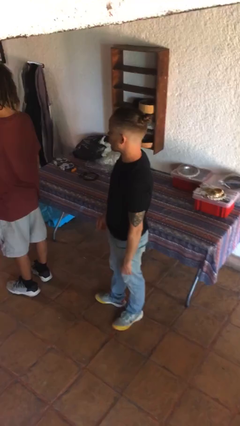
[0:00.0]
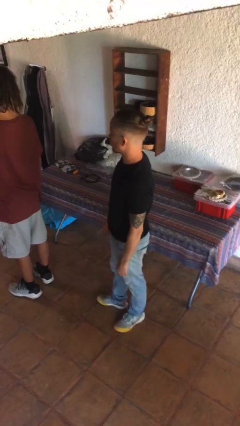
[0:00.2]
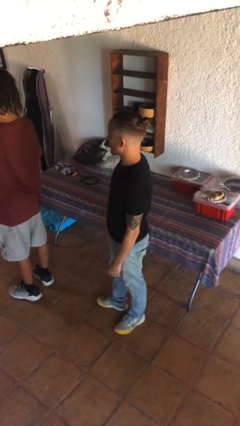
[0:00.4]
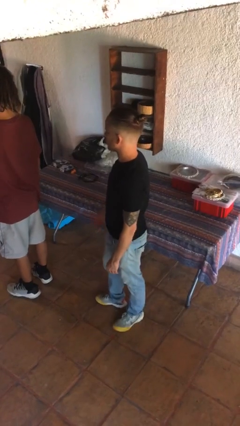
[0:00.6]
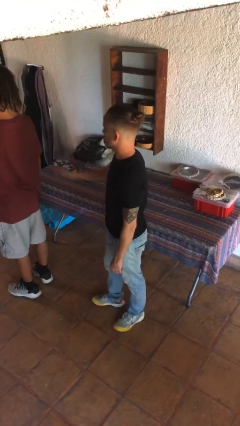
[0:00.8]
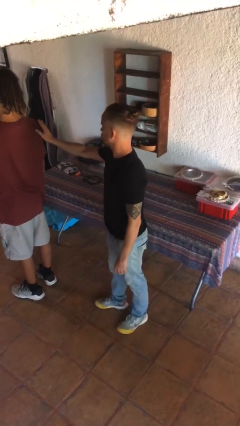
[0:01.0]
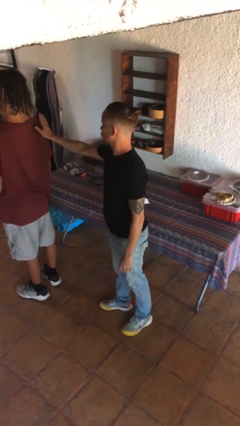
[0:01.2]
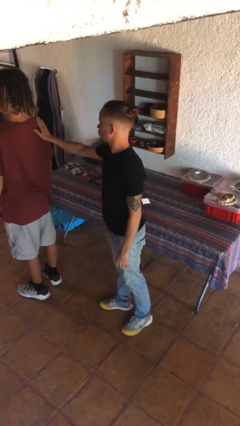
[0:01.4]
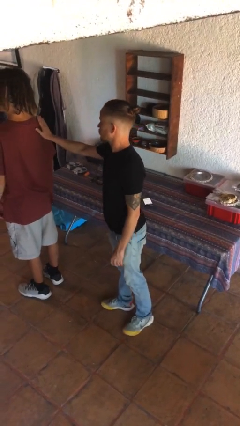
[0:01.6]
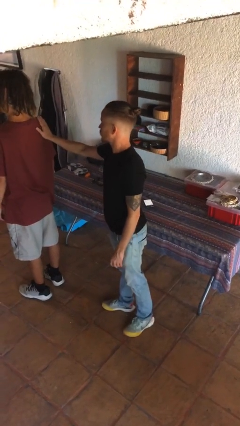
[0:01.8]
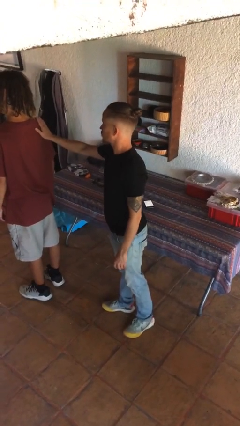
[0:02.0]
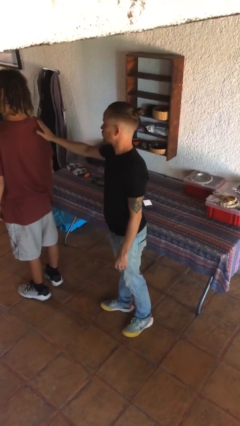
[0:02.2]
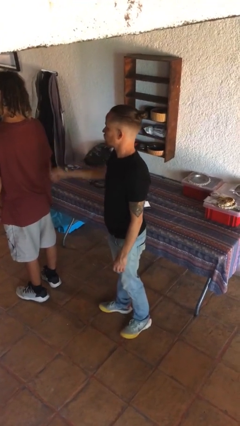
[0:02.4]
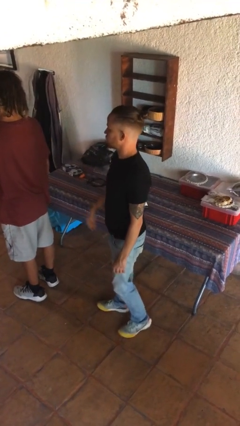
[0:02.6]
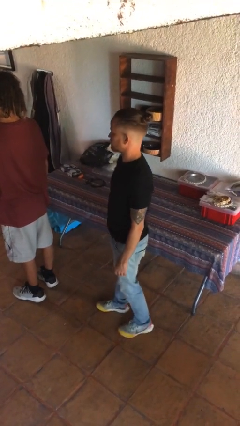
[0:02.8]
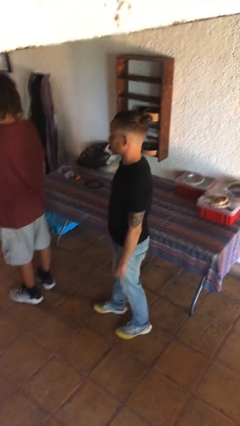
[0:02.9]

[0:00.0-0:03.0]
person touches back of person

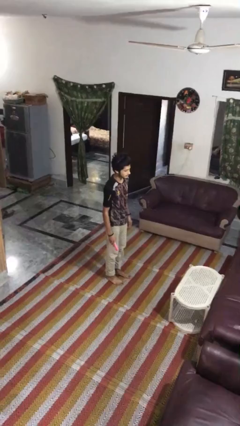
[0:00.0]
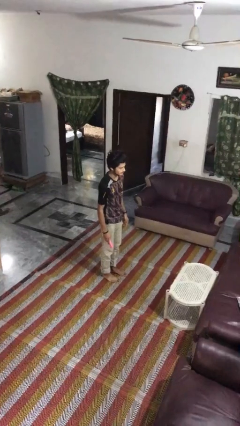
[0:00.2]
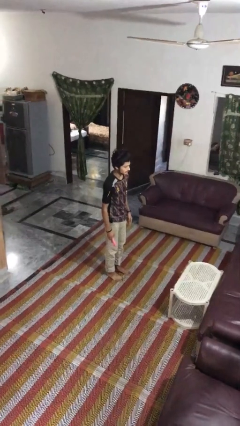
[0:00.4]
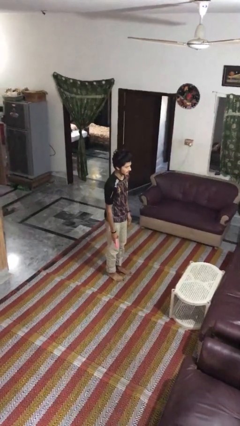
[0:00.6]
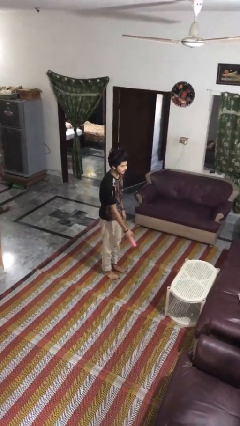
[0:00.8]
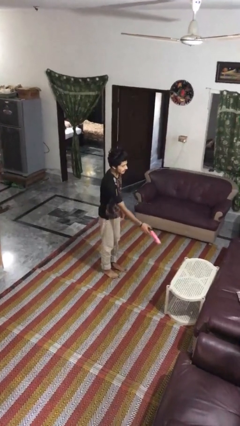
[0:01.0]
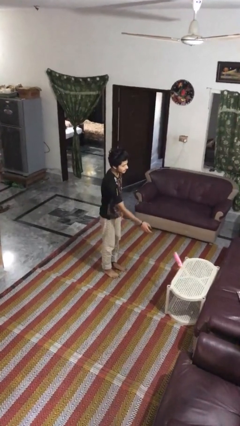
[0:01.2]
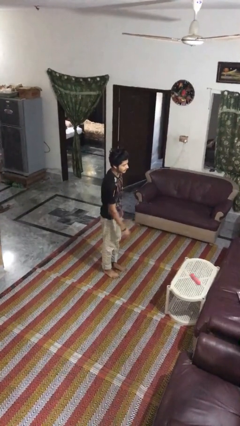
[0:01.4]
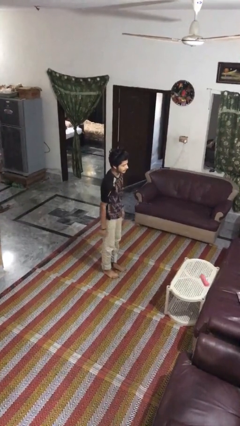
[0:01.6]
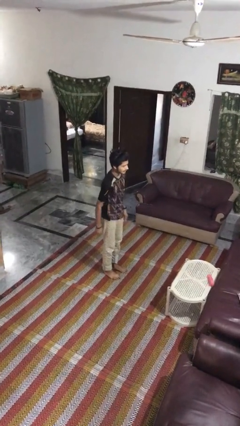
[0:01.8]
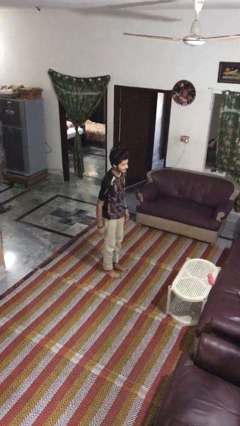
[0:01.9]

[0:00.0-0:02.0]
person throws object on table

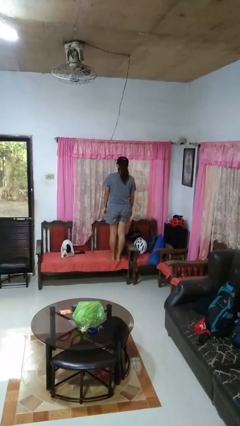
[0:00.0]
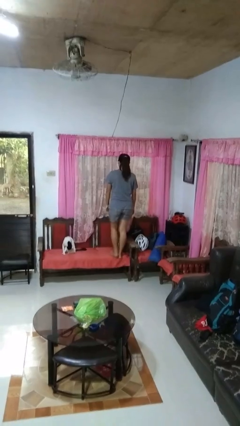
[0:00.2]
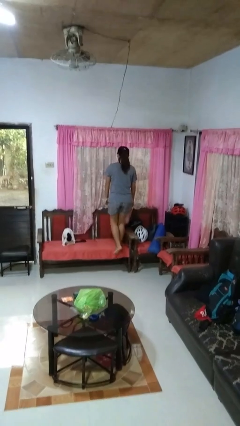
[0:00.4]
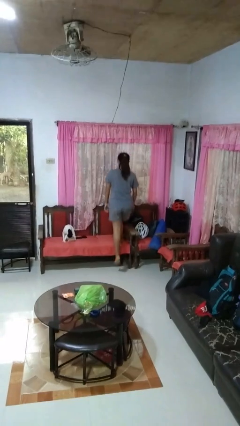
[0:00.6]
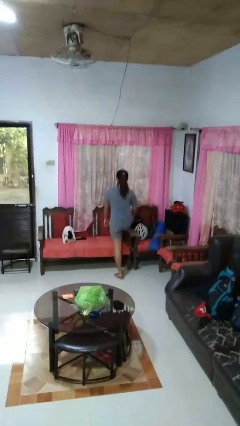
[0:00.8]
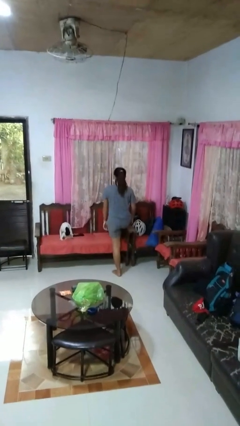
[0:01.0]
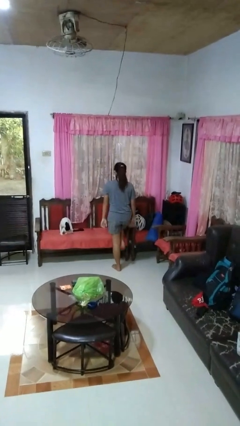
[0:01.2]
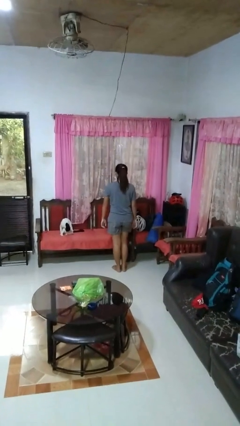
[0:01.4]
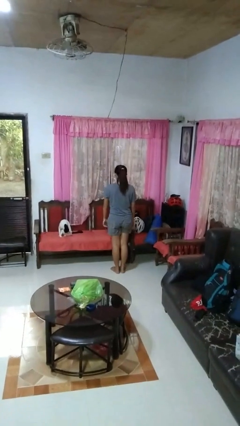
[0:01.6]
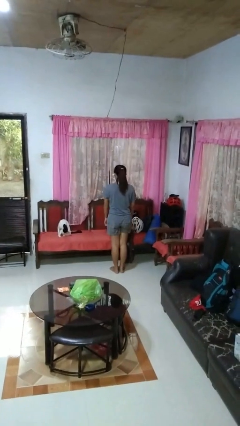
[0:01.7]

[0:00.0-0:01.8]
person climbs off chair

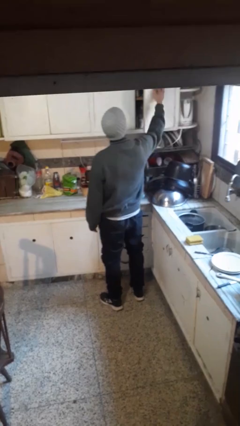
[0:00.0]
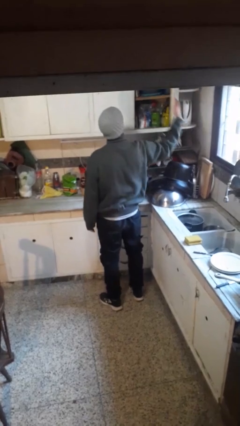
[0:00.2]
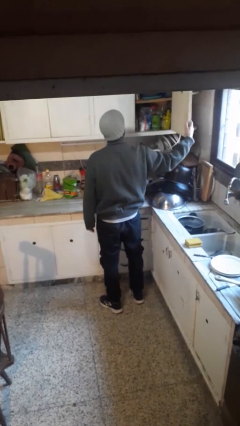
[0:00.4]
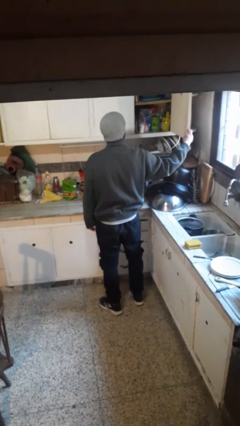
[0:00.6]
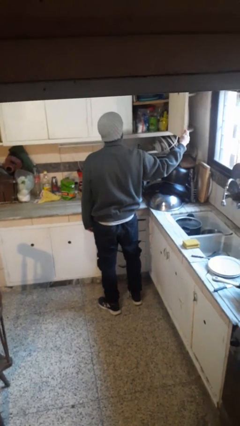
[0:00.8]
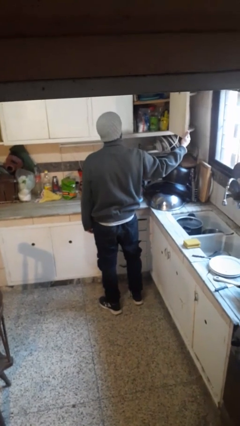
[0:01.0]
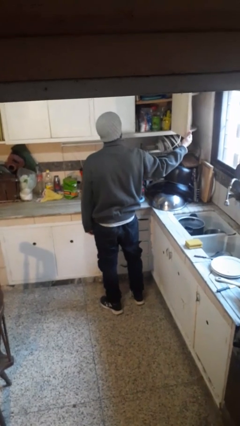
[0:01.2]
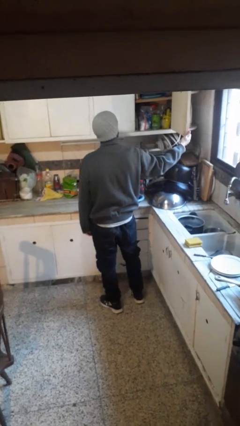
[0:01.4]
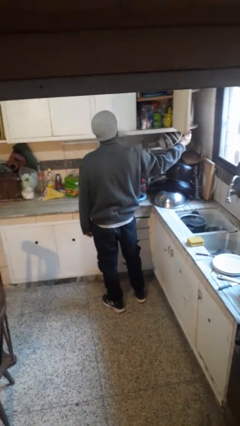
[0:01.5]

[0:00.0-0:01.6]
person opens cabinet

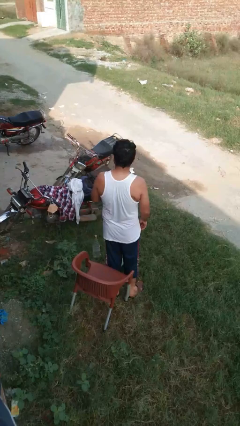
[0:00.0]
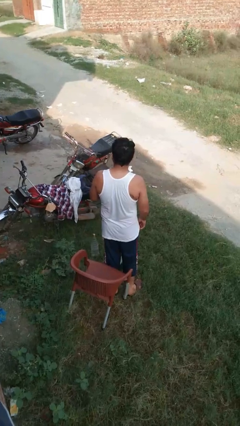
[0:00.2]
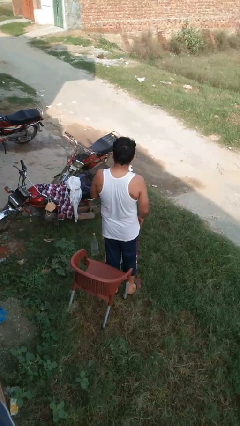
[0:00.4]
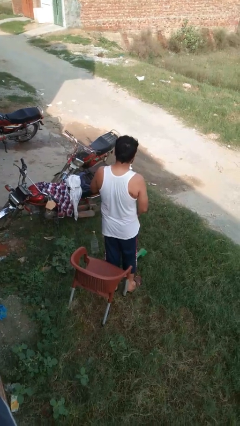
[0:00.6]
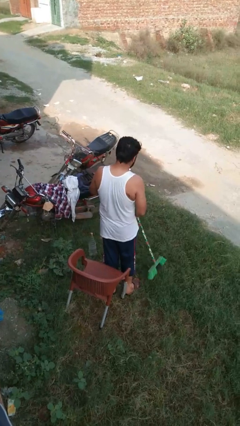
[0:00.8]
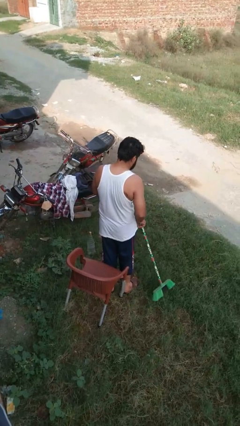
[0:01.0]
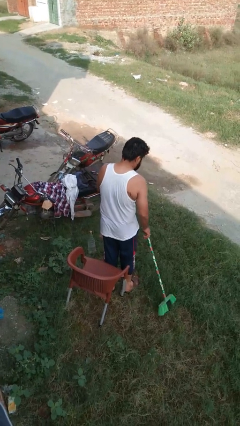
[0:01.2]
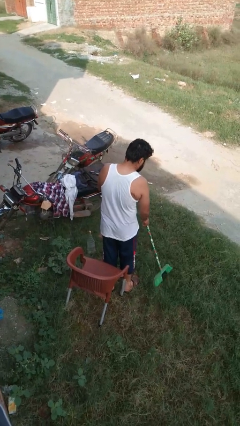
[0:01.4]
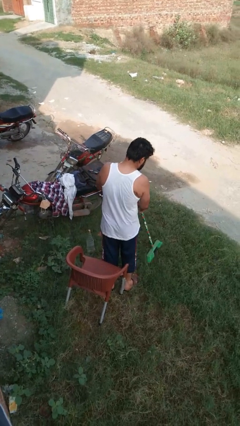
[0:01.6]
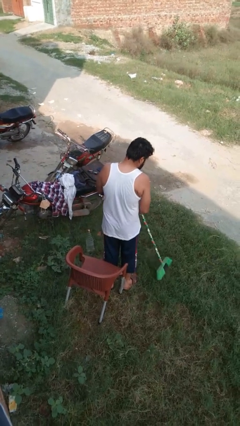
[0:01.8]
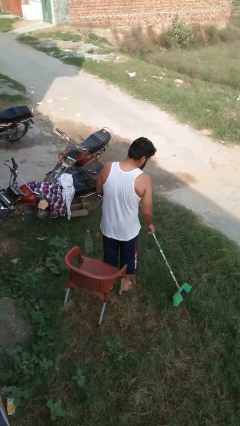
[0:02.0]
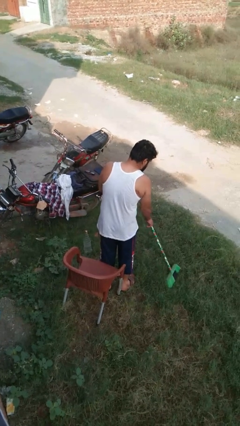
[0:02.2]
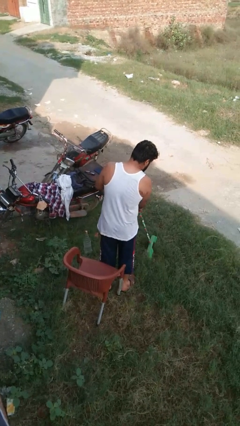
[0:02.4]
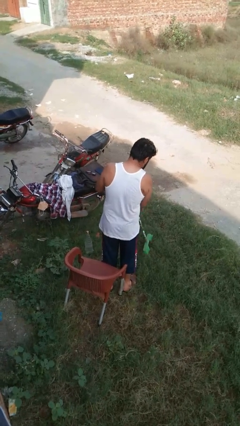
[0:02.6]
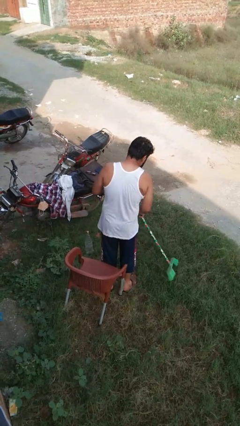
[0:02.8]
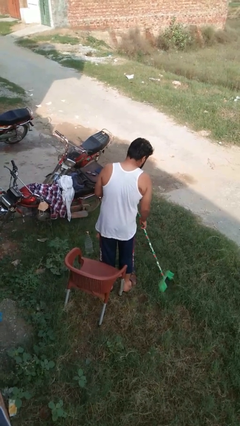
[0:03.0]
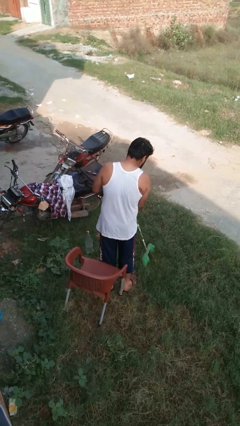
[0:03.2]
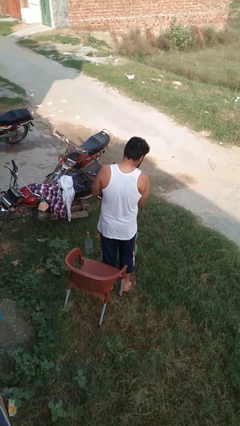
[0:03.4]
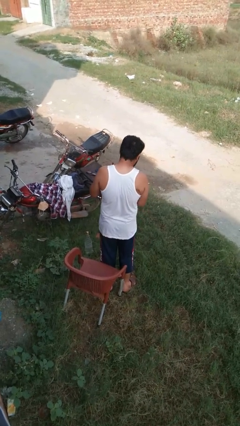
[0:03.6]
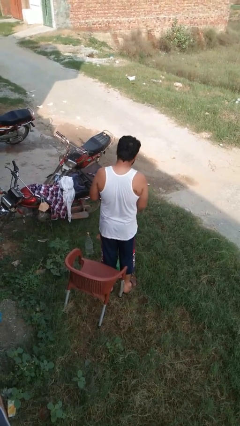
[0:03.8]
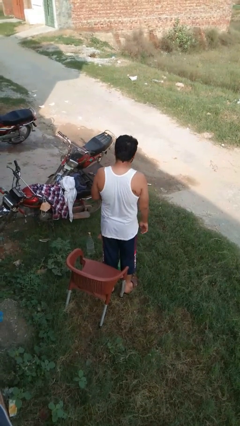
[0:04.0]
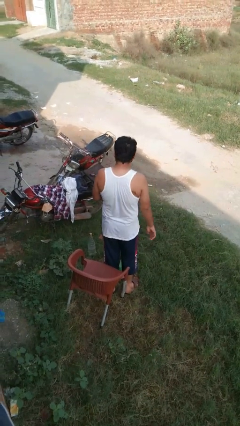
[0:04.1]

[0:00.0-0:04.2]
person sweeps floor

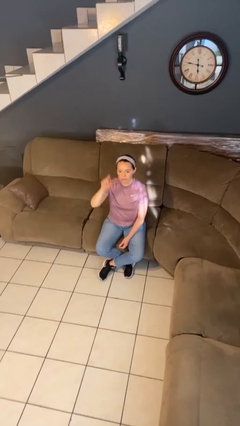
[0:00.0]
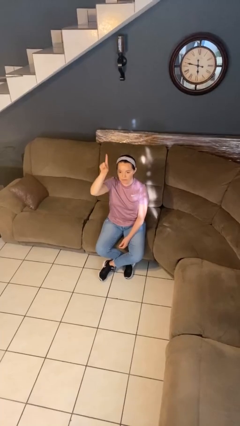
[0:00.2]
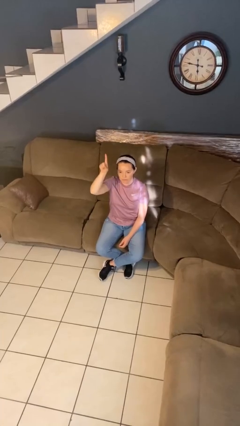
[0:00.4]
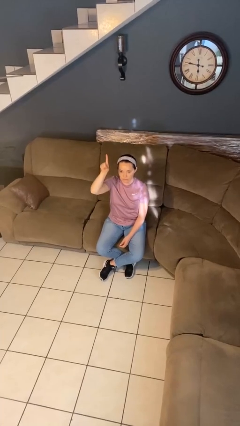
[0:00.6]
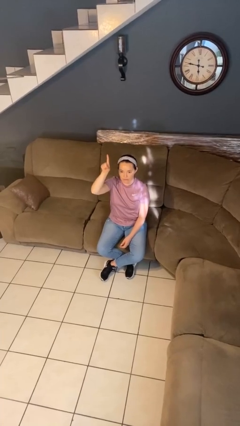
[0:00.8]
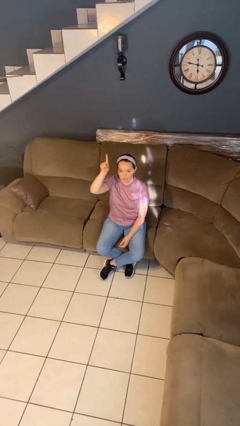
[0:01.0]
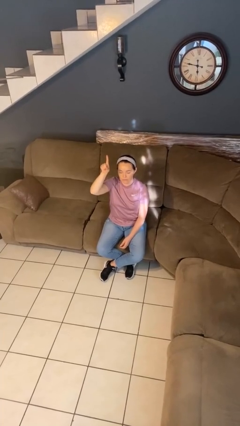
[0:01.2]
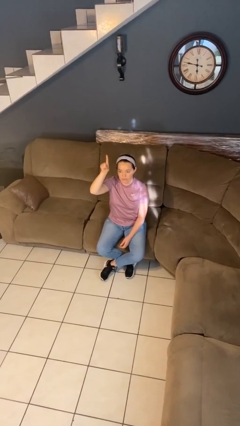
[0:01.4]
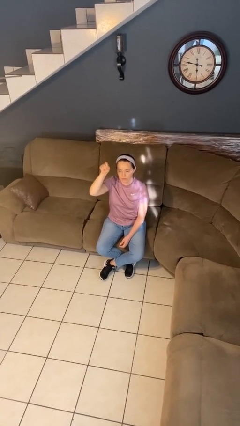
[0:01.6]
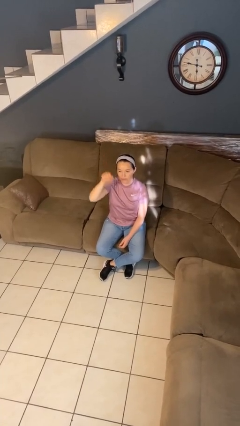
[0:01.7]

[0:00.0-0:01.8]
person gestures number one

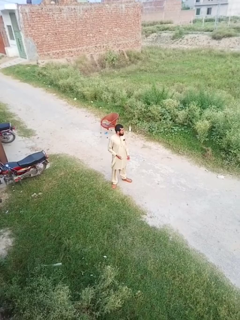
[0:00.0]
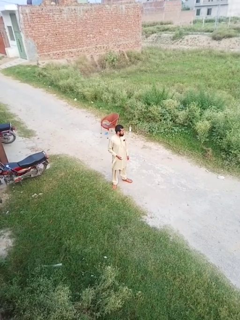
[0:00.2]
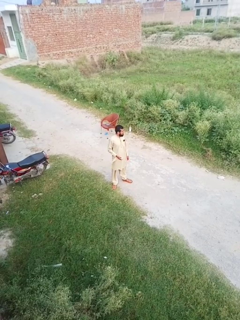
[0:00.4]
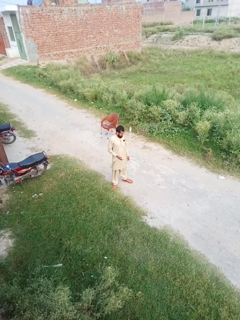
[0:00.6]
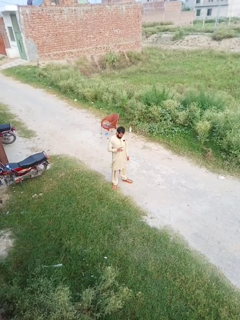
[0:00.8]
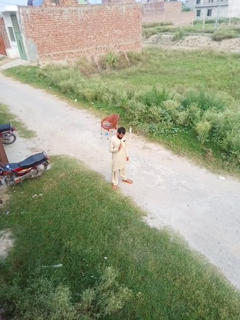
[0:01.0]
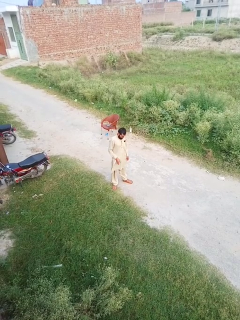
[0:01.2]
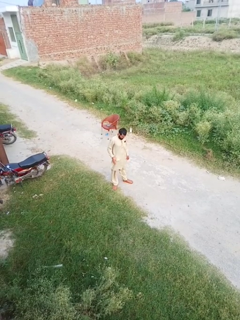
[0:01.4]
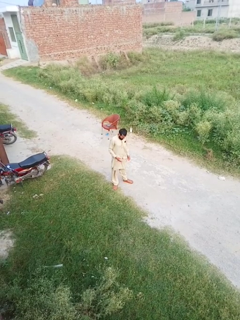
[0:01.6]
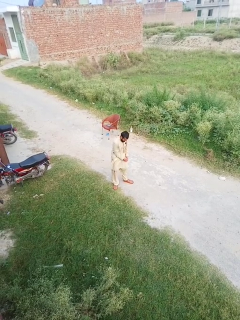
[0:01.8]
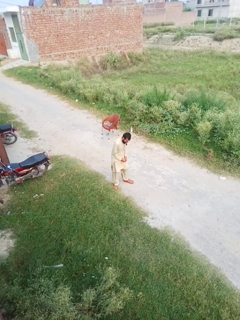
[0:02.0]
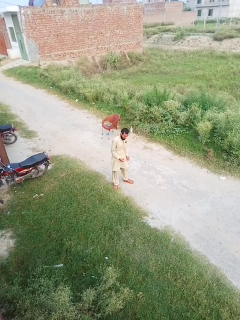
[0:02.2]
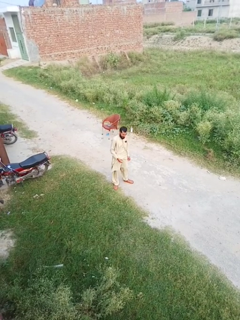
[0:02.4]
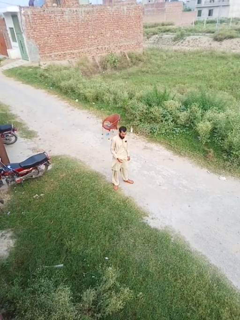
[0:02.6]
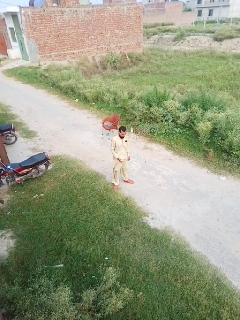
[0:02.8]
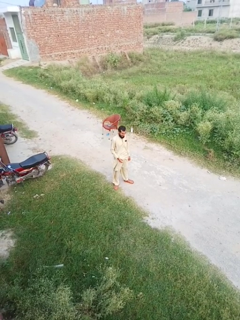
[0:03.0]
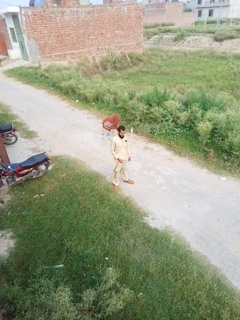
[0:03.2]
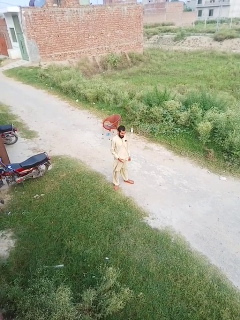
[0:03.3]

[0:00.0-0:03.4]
person bounces ball on floor

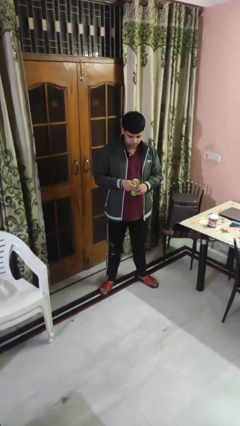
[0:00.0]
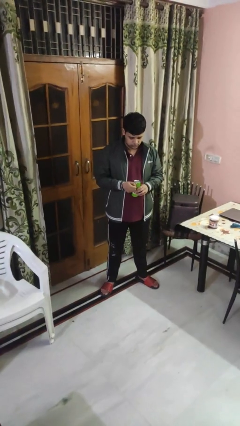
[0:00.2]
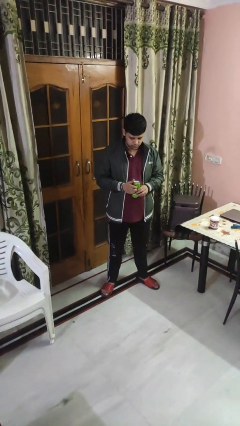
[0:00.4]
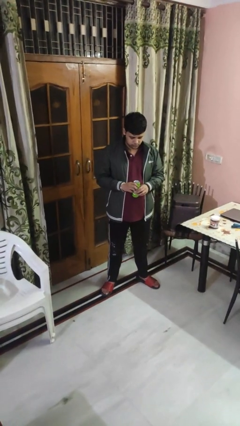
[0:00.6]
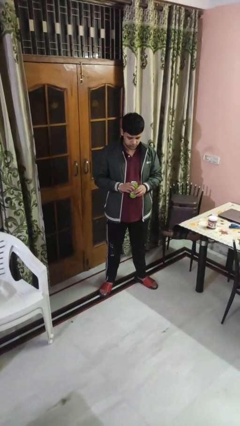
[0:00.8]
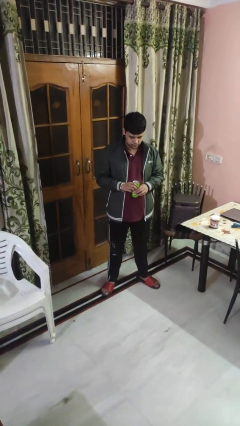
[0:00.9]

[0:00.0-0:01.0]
person opens beverage can
